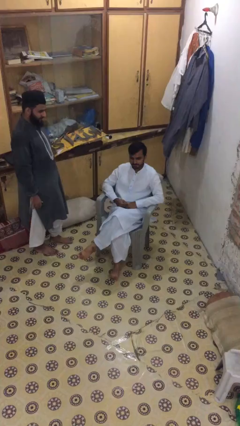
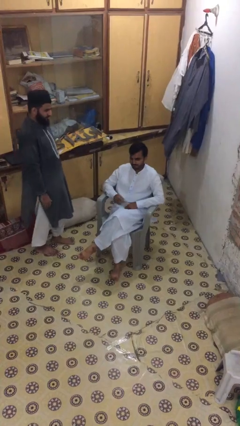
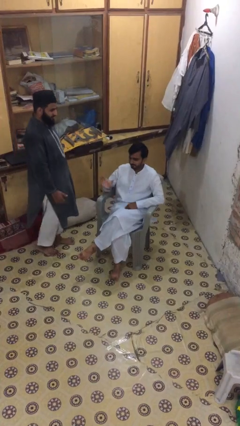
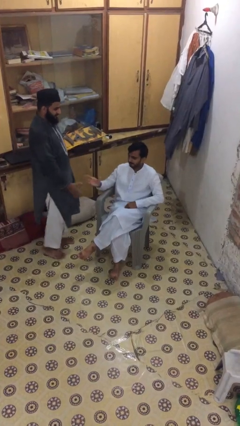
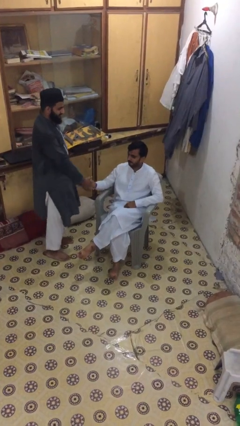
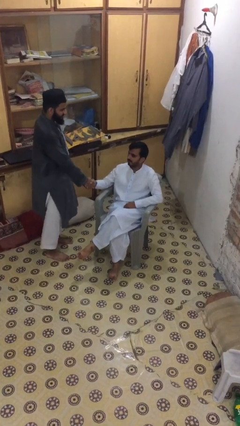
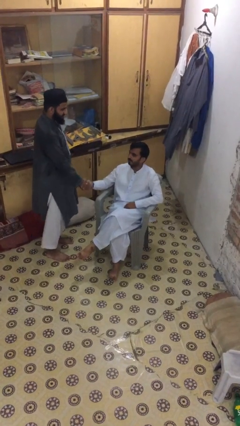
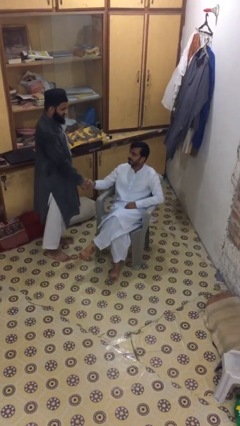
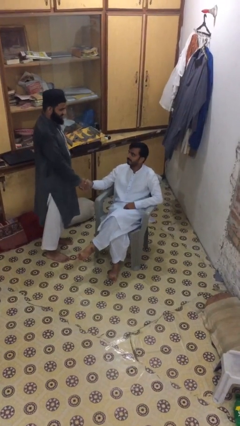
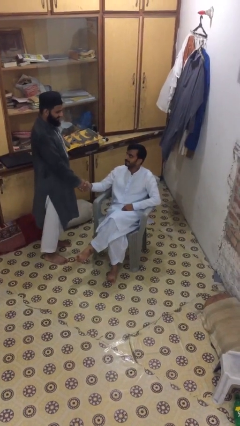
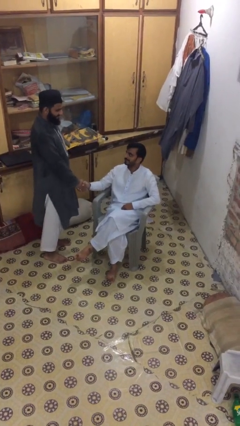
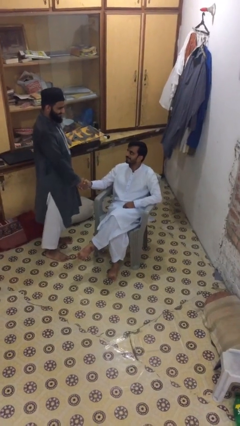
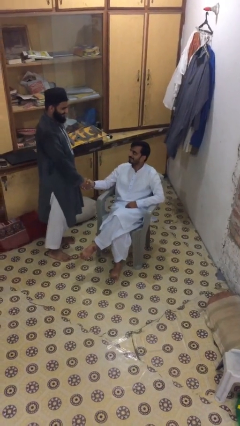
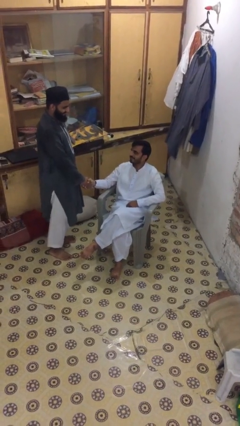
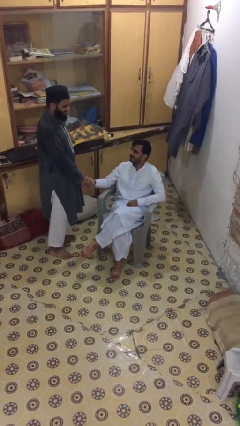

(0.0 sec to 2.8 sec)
person shakes hand

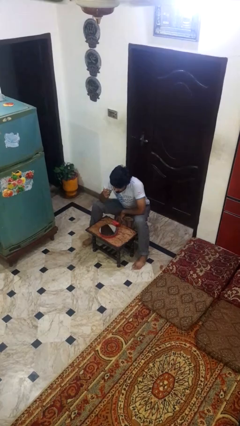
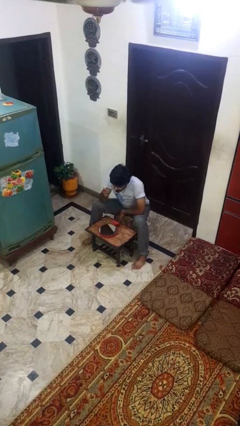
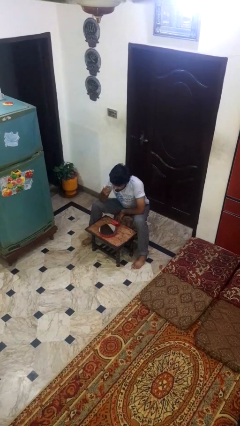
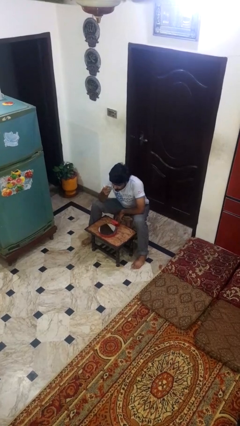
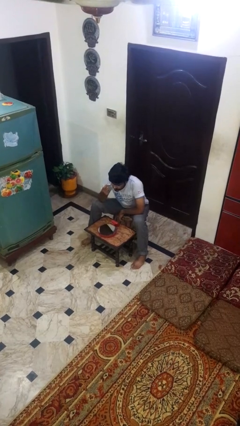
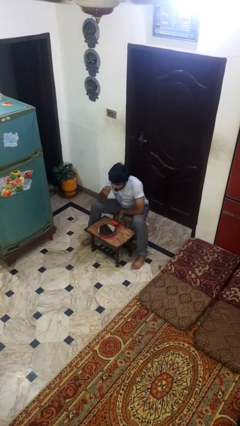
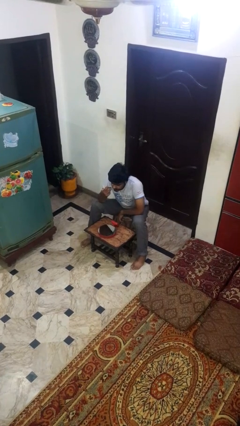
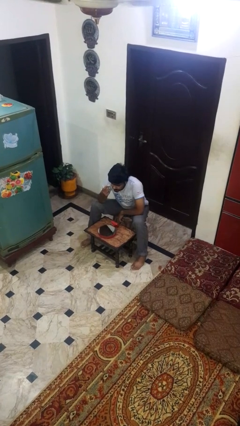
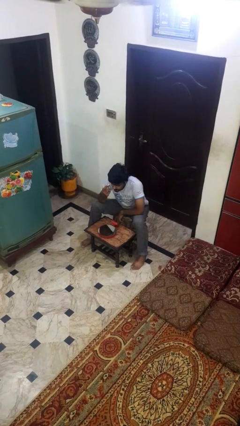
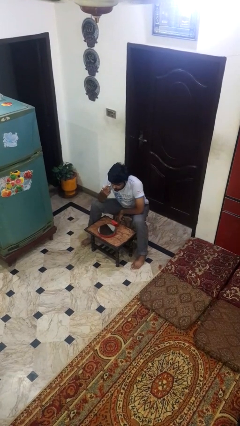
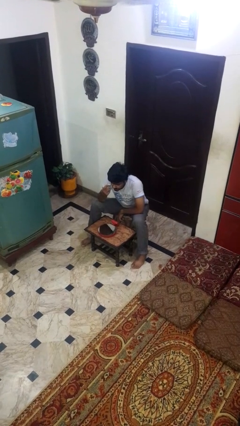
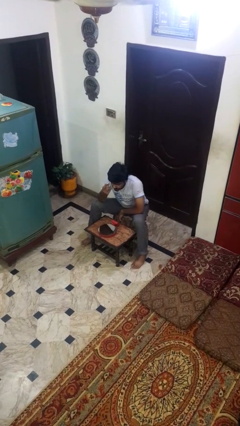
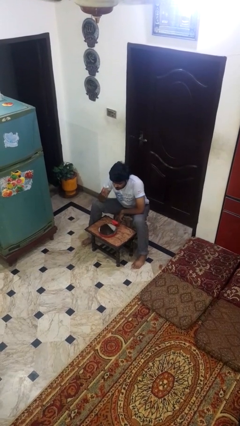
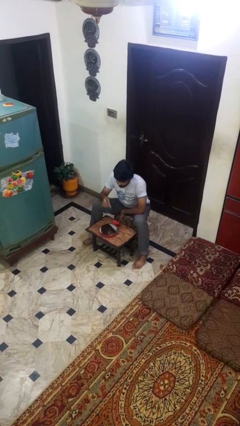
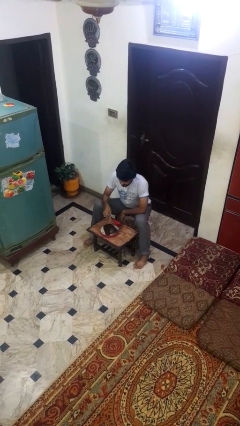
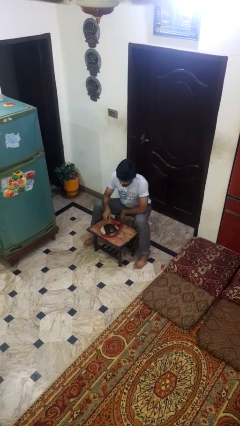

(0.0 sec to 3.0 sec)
person applies eye makeup

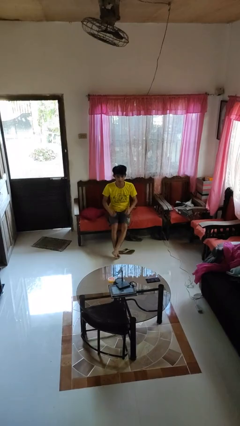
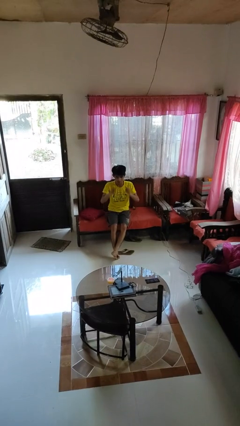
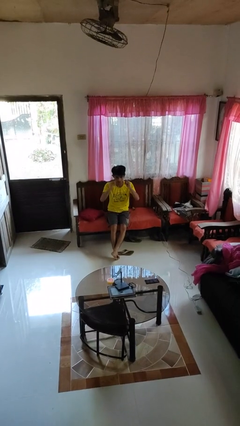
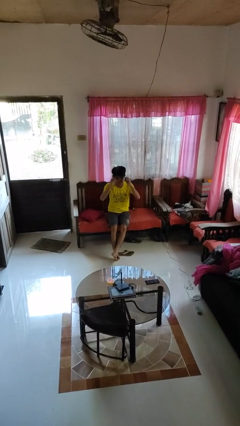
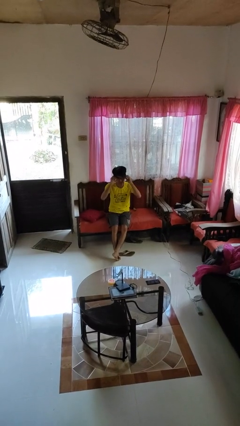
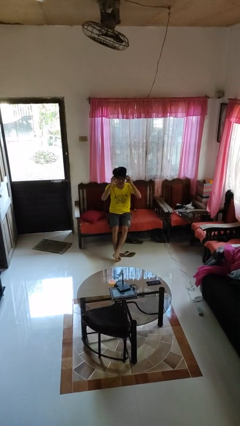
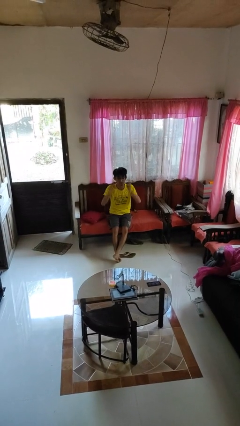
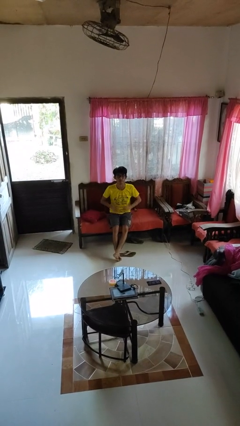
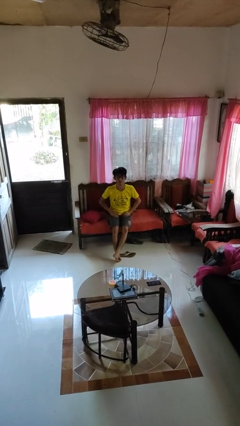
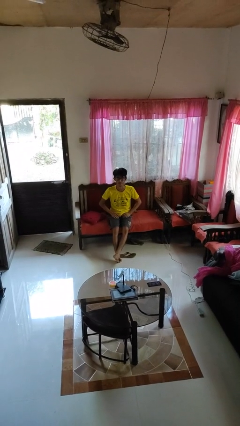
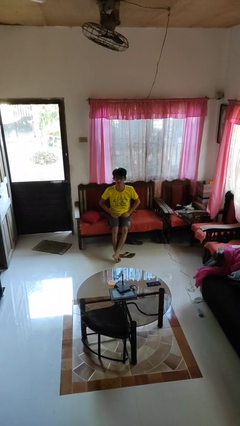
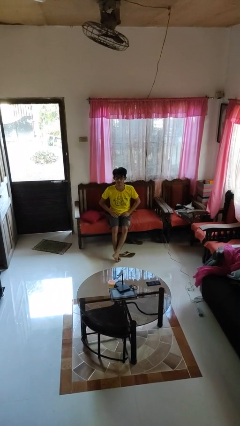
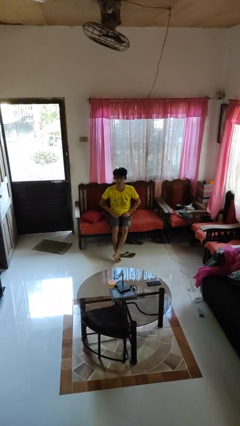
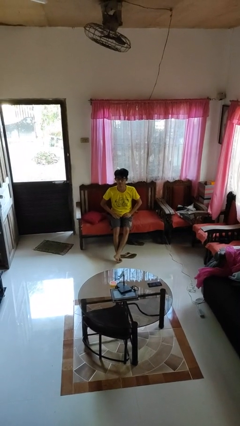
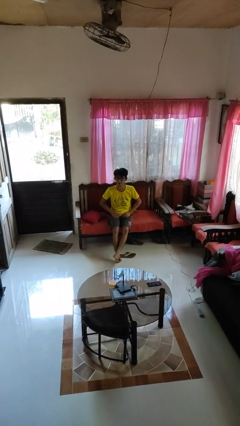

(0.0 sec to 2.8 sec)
person puts on glasses

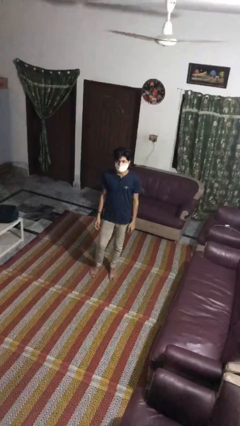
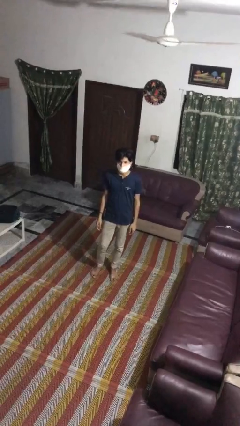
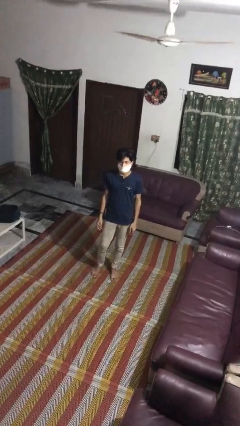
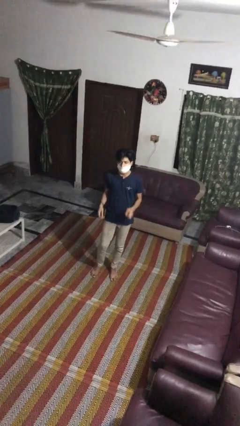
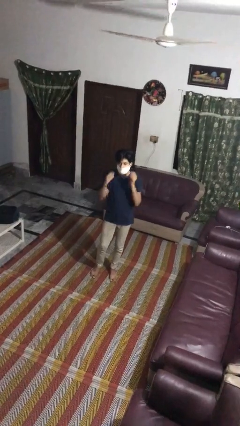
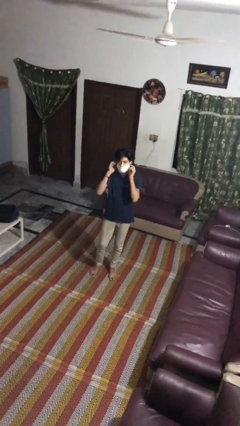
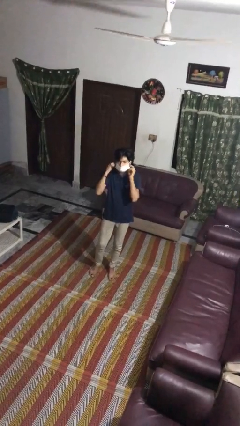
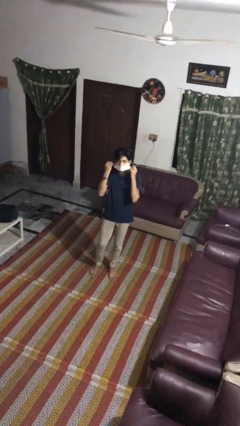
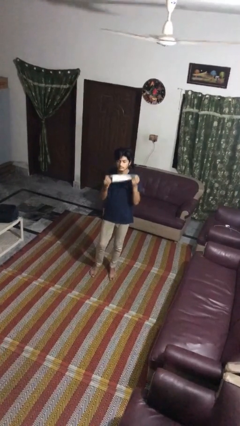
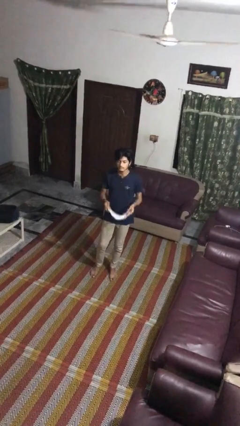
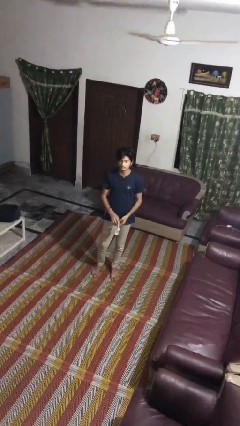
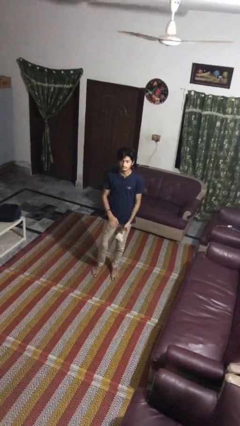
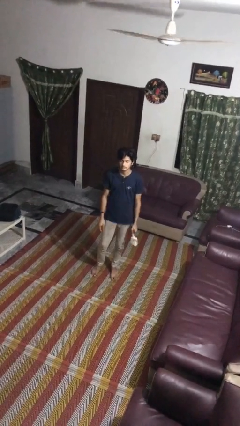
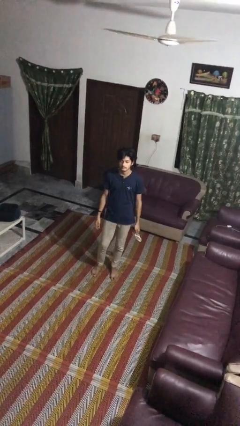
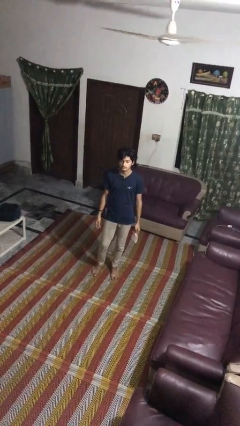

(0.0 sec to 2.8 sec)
person takes off facemask

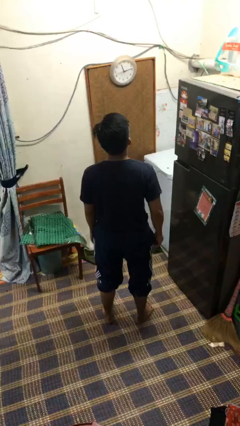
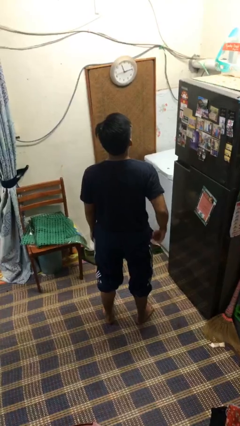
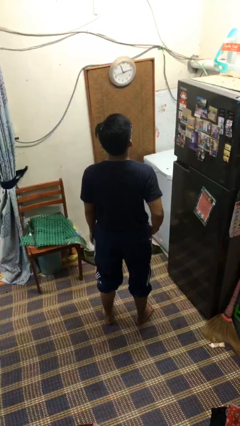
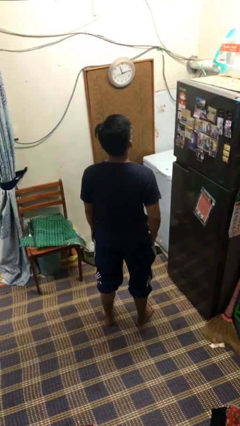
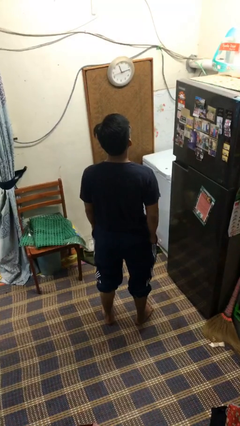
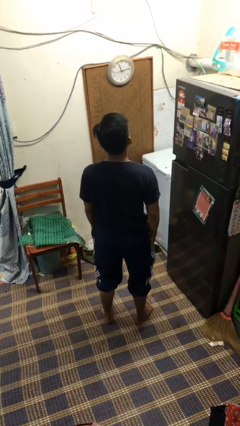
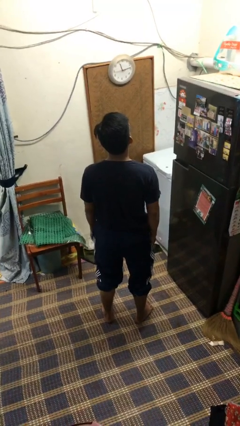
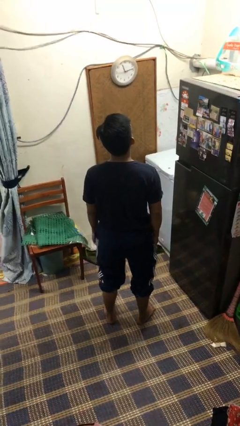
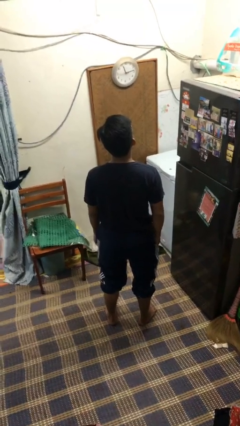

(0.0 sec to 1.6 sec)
person puts hands in back pockets

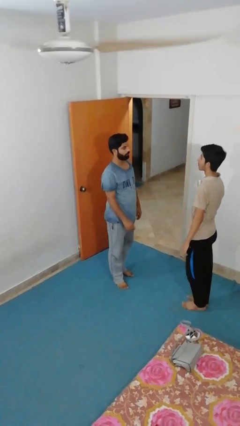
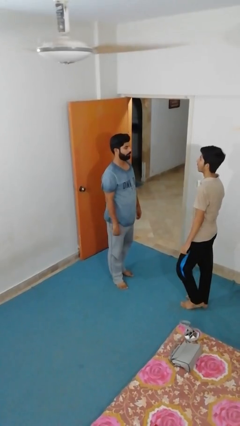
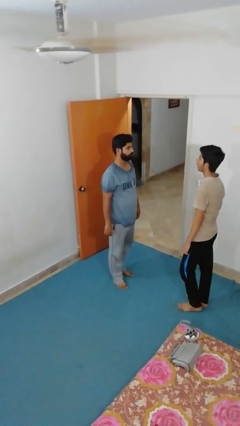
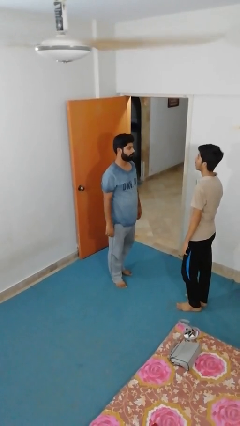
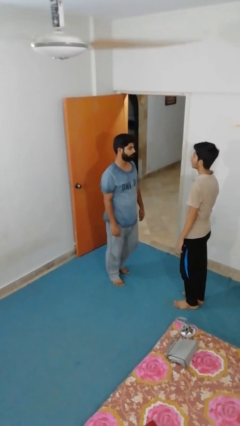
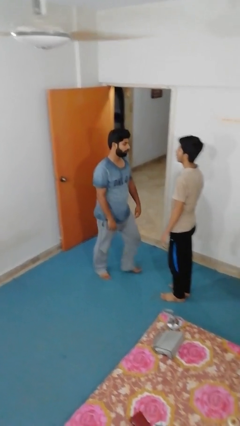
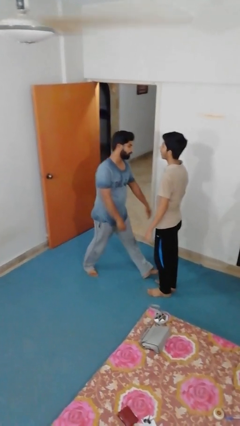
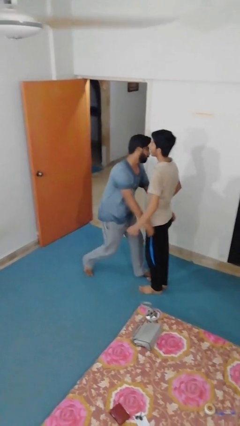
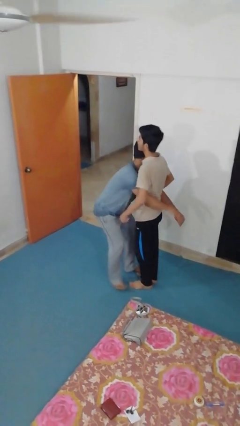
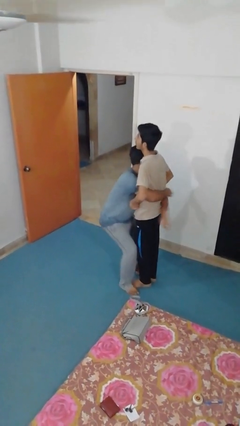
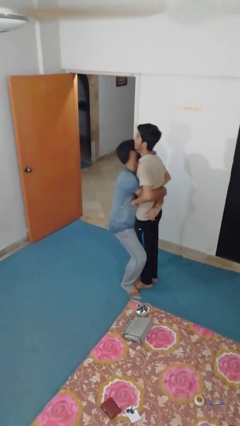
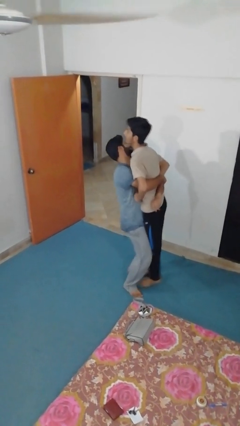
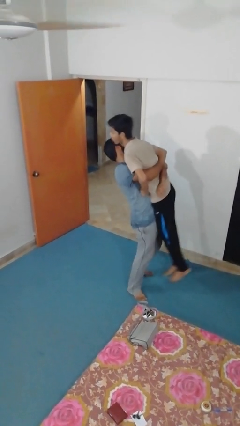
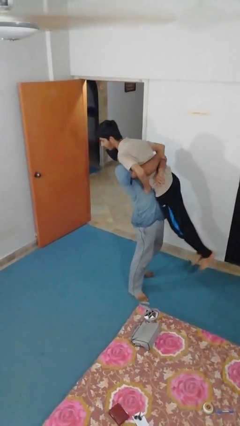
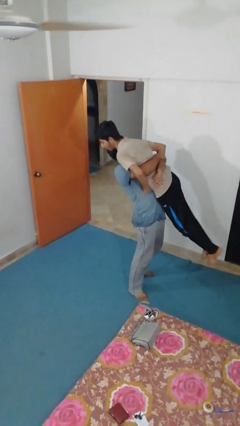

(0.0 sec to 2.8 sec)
person picks up person

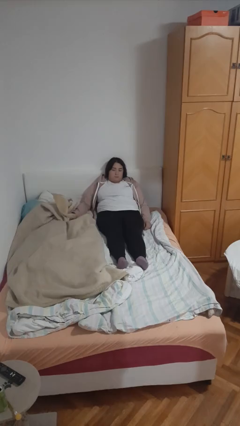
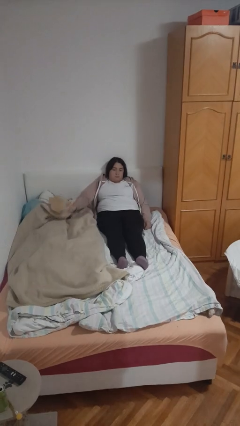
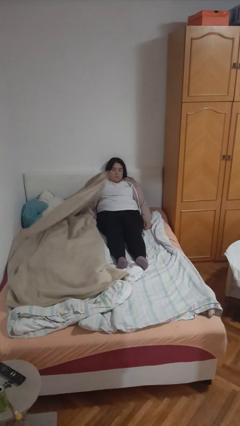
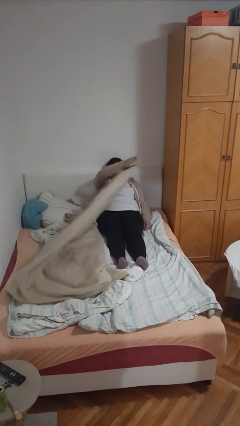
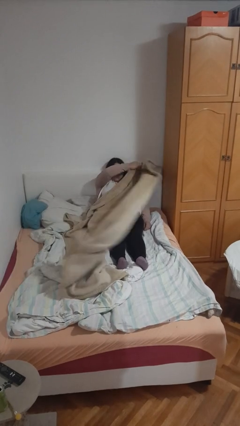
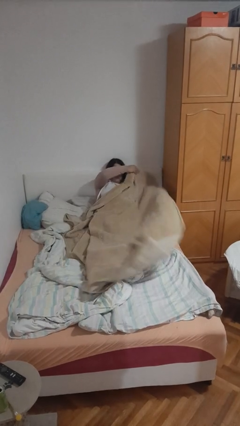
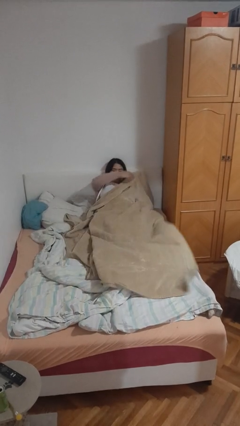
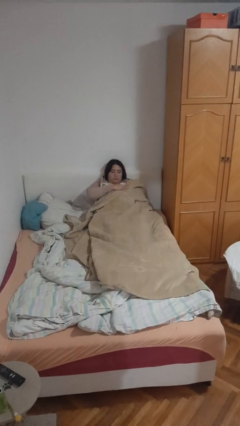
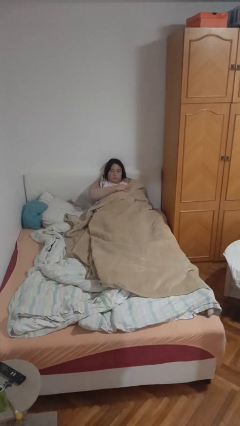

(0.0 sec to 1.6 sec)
person covers with blanket
